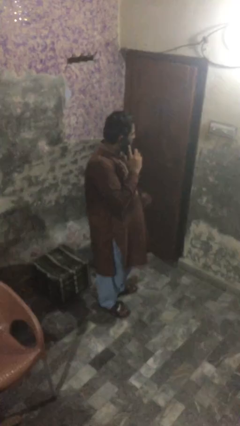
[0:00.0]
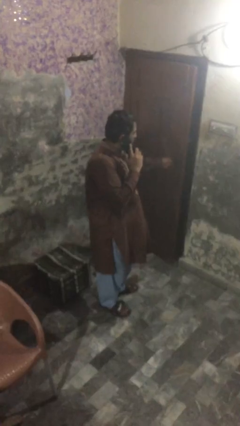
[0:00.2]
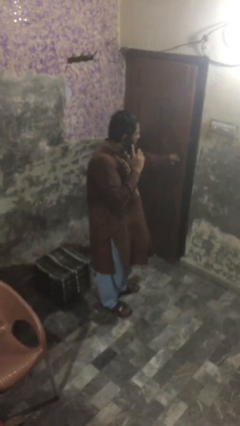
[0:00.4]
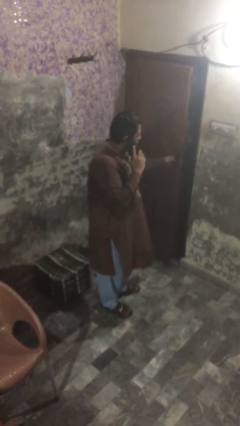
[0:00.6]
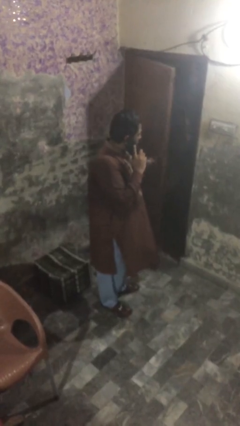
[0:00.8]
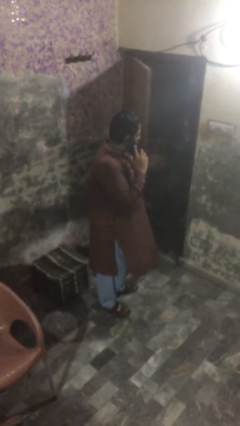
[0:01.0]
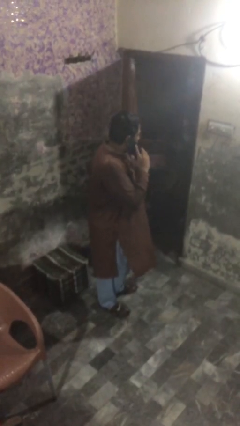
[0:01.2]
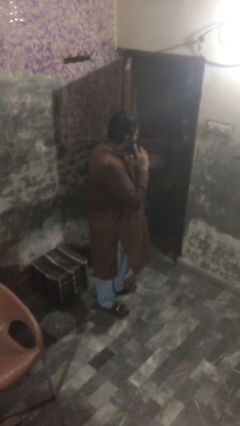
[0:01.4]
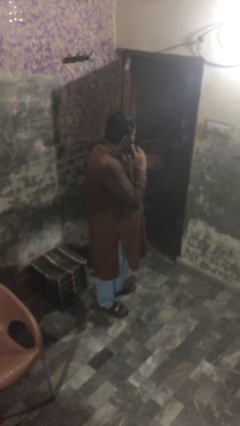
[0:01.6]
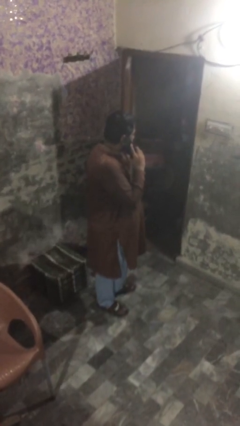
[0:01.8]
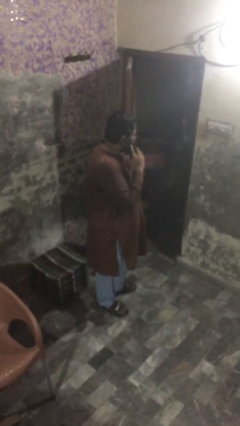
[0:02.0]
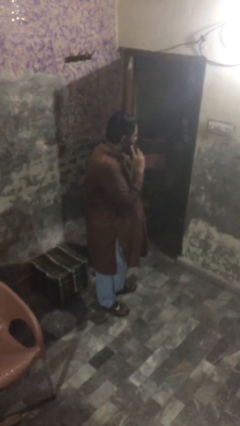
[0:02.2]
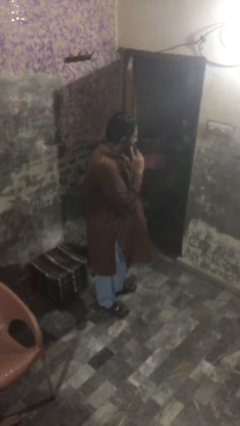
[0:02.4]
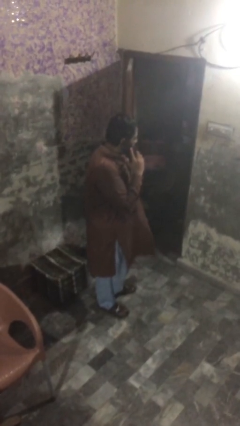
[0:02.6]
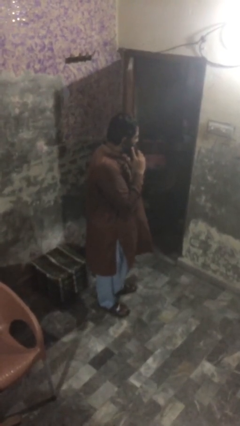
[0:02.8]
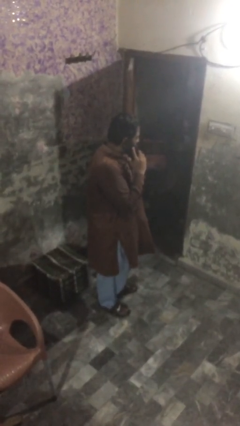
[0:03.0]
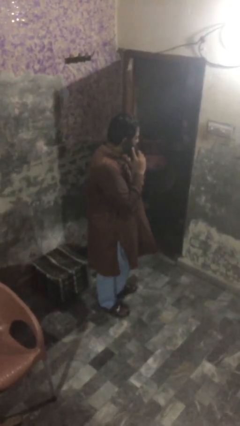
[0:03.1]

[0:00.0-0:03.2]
person opens facility door

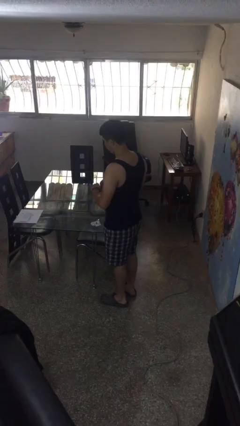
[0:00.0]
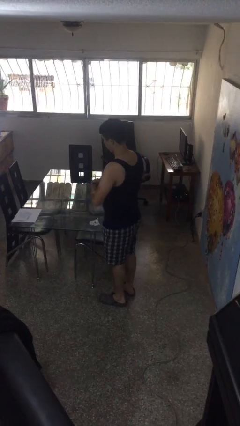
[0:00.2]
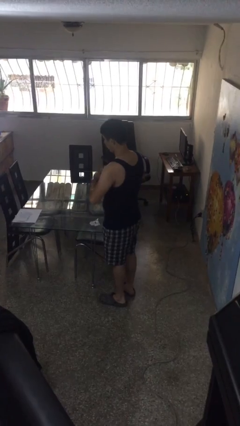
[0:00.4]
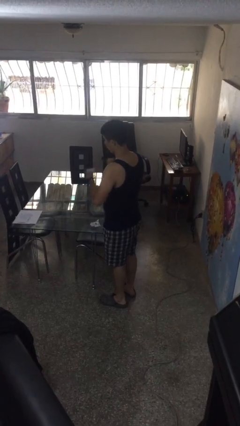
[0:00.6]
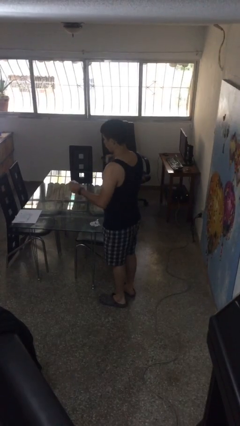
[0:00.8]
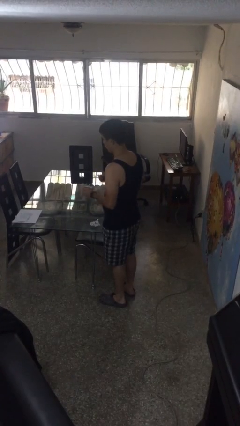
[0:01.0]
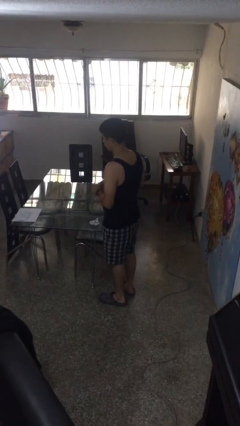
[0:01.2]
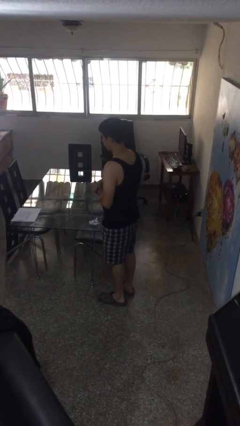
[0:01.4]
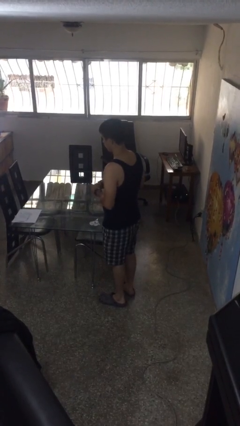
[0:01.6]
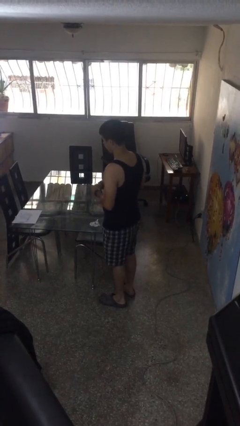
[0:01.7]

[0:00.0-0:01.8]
person tears paper

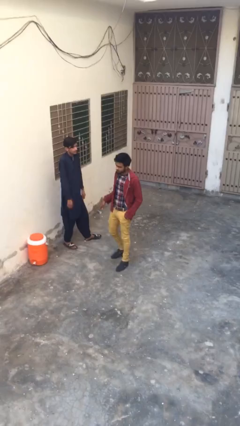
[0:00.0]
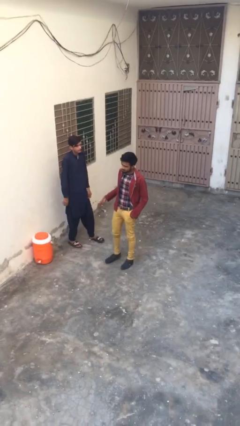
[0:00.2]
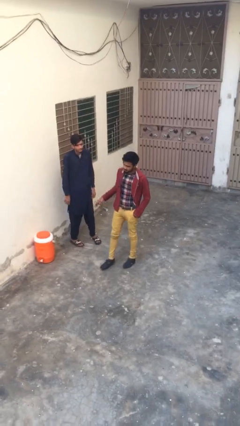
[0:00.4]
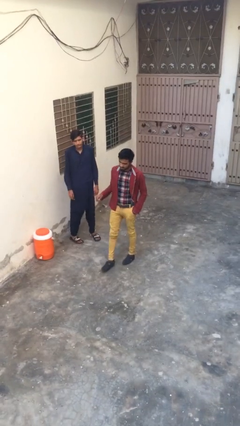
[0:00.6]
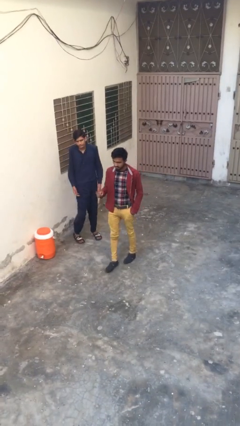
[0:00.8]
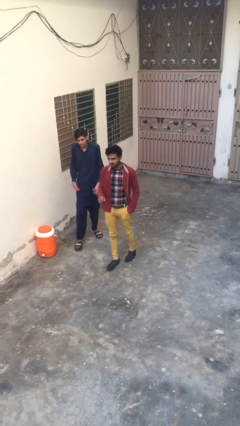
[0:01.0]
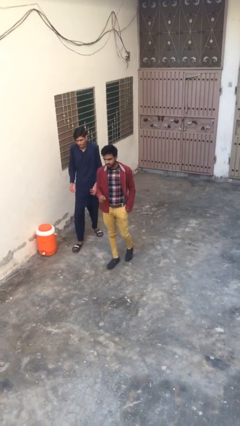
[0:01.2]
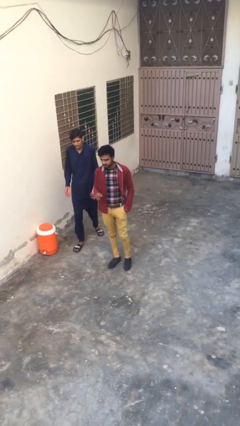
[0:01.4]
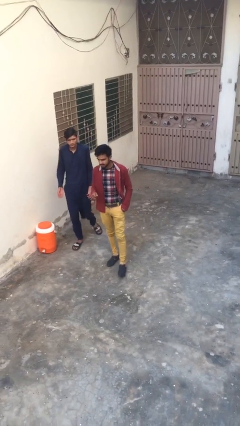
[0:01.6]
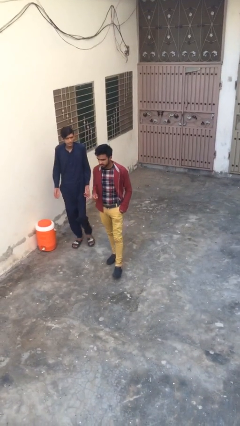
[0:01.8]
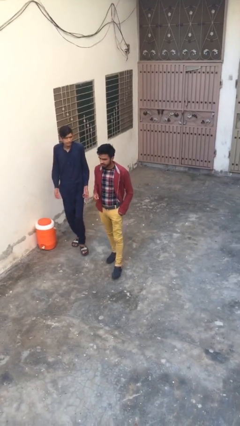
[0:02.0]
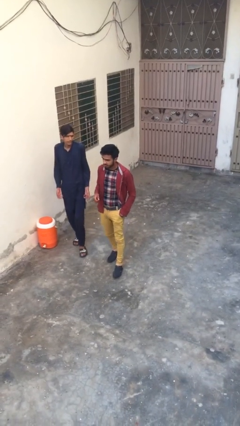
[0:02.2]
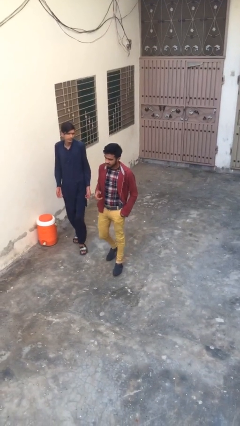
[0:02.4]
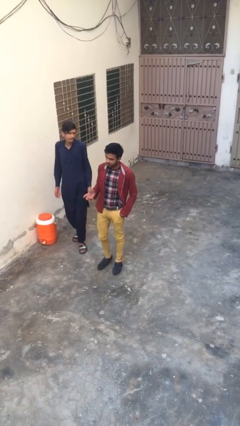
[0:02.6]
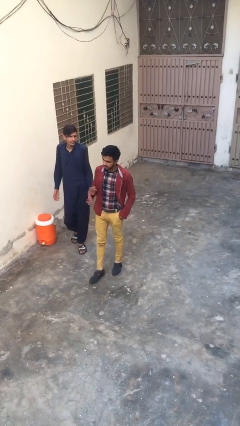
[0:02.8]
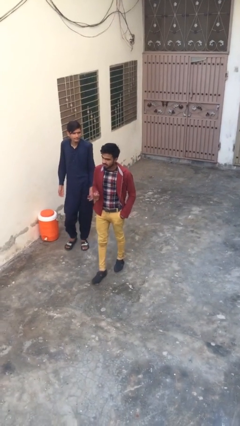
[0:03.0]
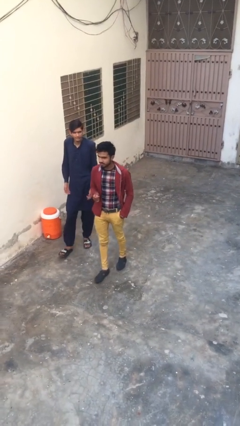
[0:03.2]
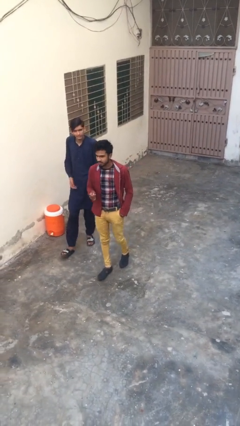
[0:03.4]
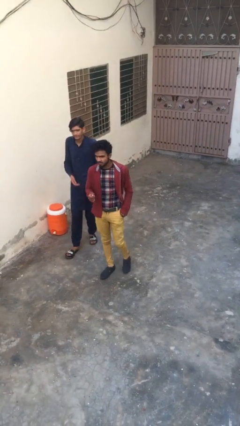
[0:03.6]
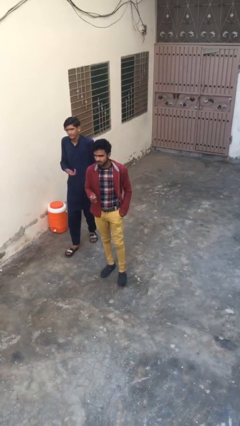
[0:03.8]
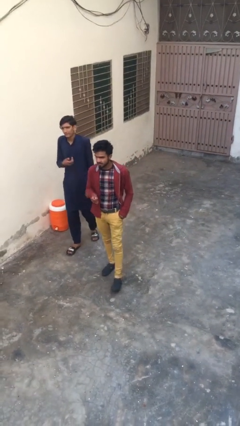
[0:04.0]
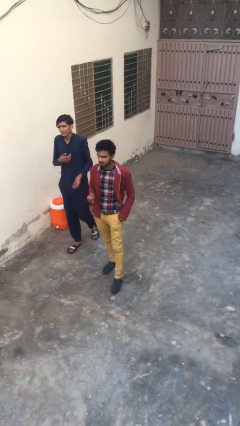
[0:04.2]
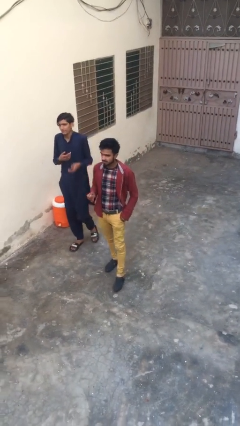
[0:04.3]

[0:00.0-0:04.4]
person talks to person

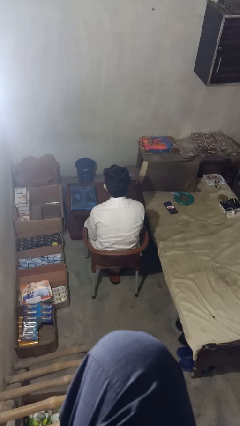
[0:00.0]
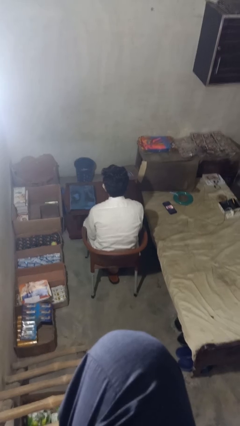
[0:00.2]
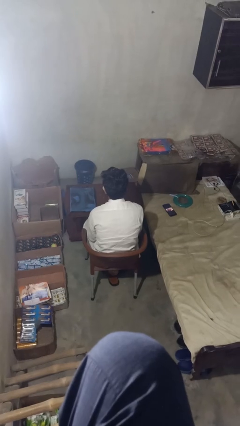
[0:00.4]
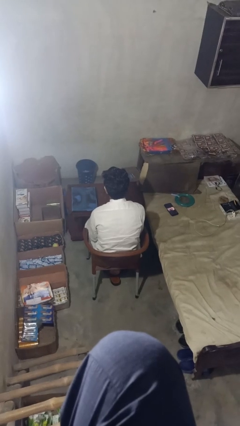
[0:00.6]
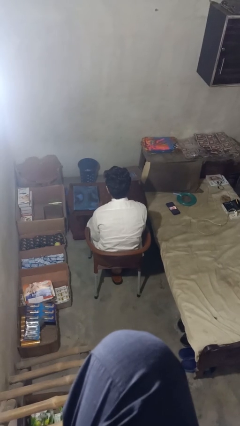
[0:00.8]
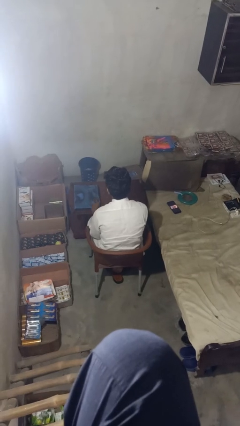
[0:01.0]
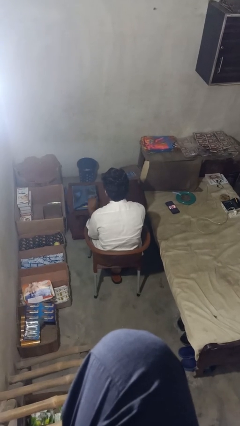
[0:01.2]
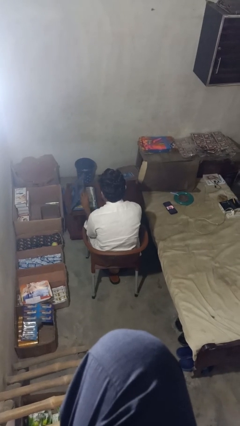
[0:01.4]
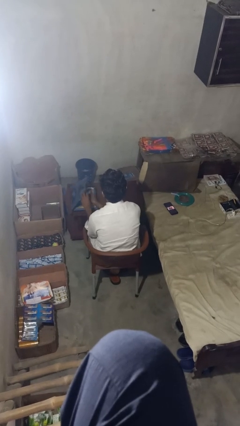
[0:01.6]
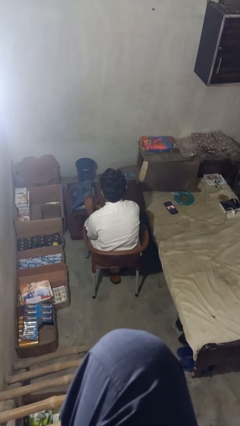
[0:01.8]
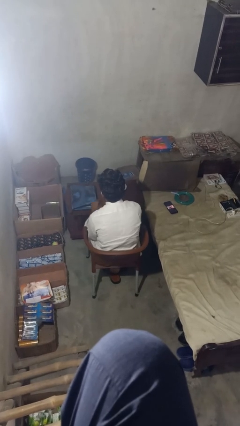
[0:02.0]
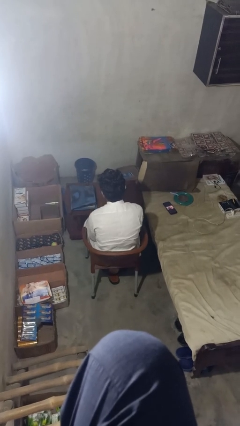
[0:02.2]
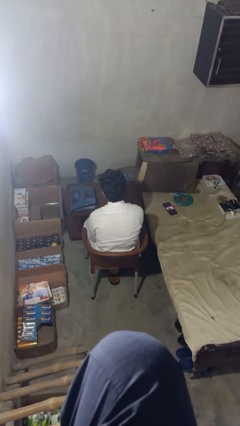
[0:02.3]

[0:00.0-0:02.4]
person takes object from bag

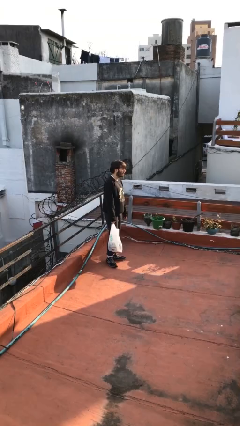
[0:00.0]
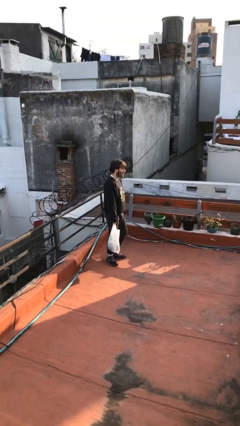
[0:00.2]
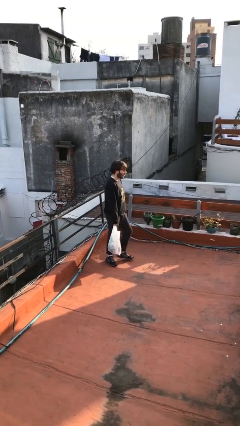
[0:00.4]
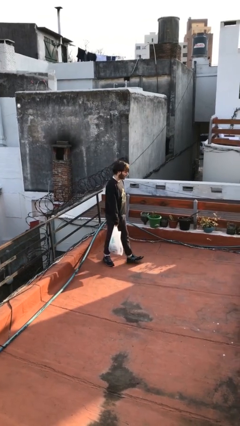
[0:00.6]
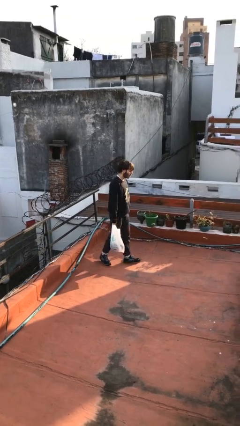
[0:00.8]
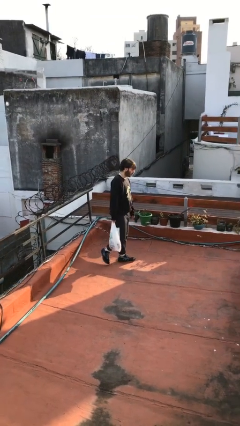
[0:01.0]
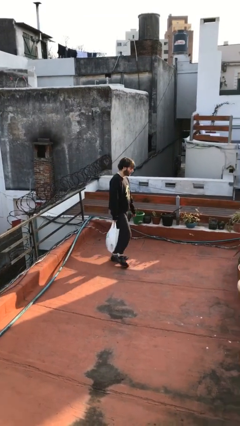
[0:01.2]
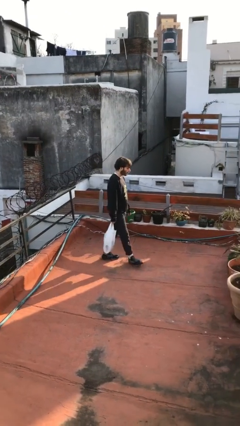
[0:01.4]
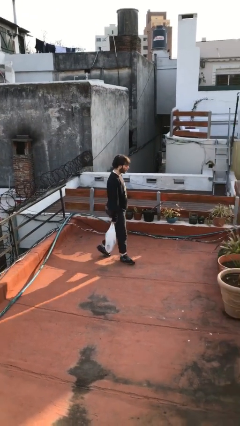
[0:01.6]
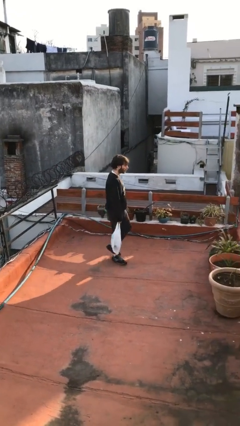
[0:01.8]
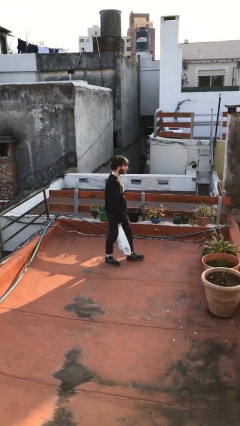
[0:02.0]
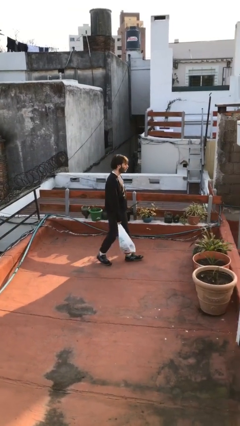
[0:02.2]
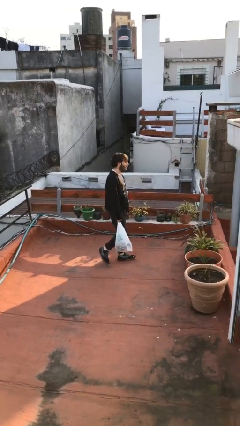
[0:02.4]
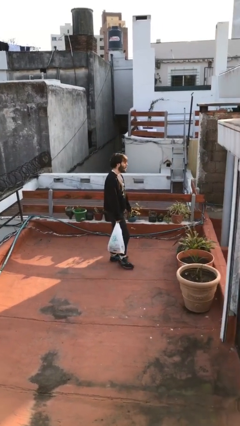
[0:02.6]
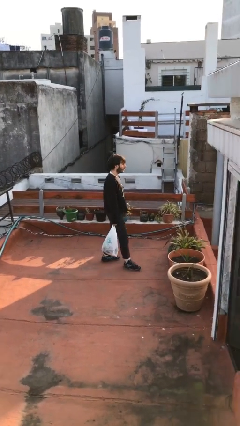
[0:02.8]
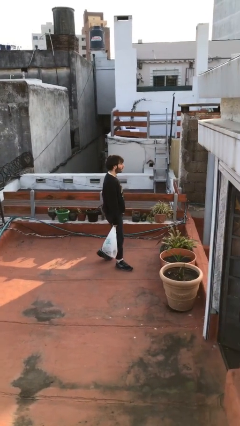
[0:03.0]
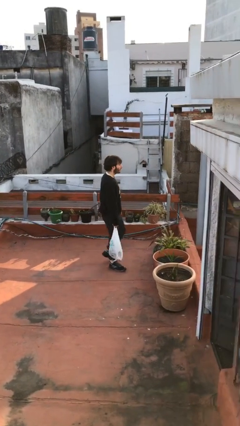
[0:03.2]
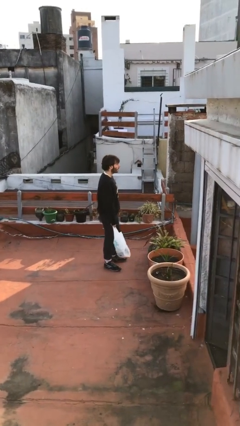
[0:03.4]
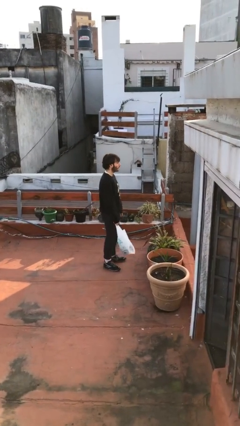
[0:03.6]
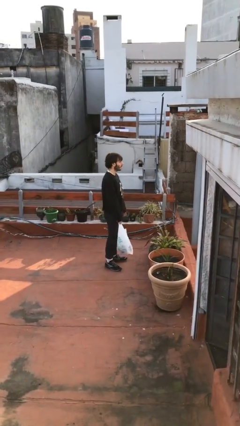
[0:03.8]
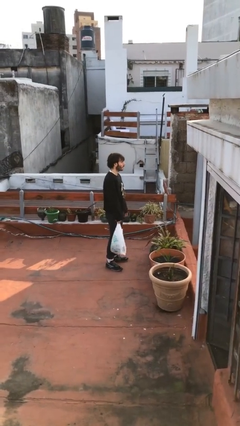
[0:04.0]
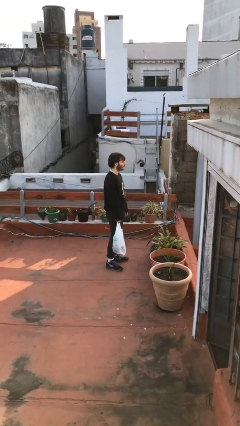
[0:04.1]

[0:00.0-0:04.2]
person carries groceries

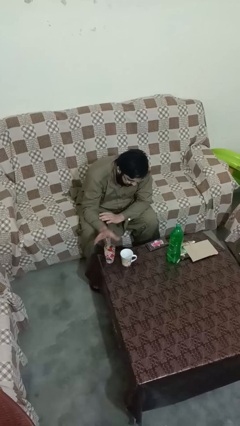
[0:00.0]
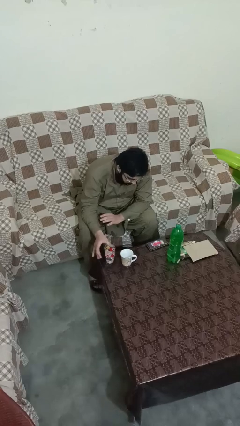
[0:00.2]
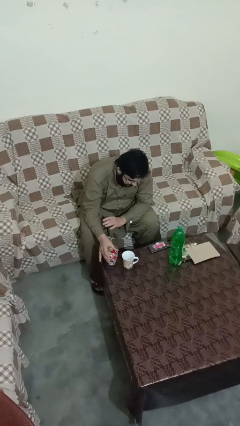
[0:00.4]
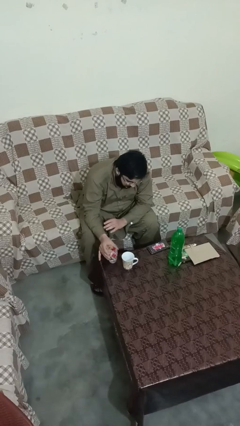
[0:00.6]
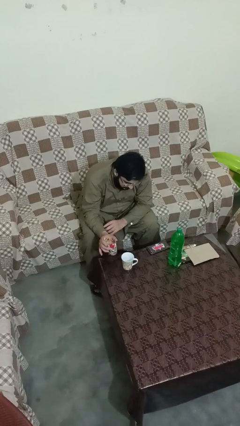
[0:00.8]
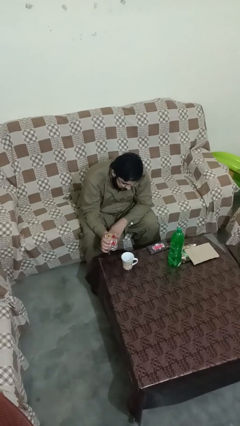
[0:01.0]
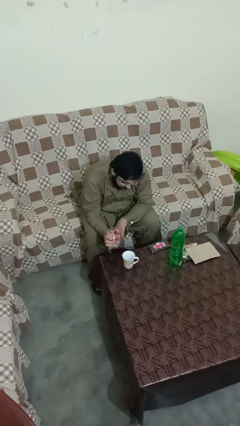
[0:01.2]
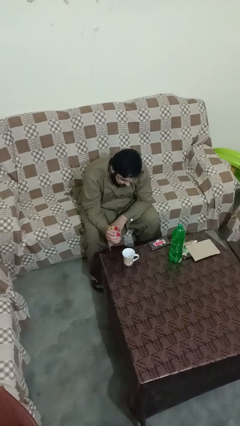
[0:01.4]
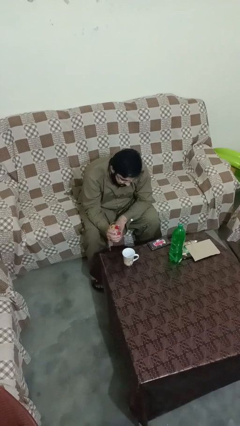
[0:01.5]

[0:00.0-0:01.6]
person picks up object from table
